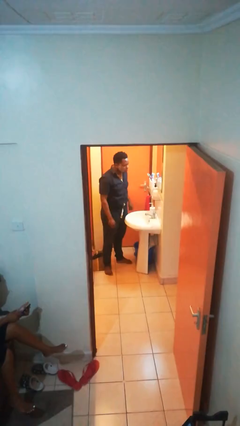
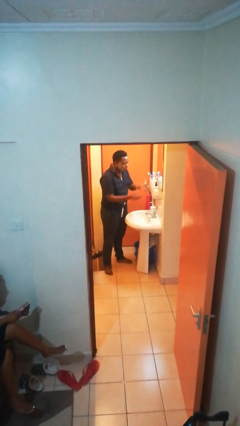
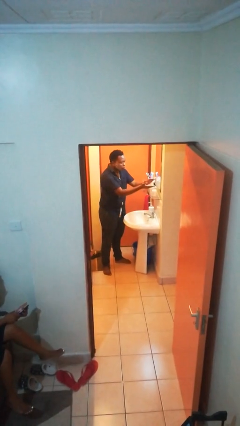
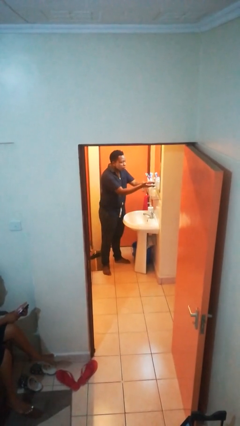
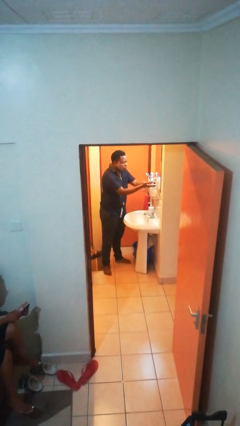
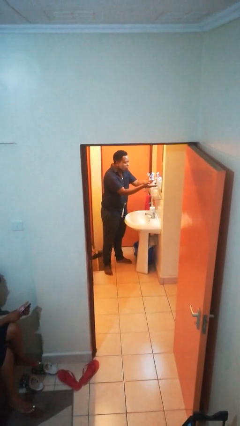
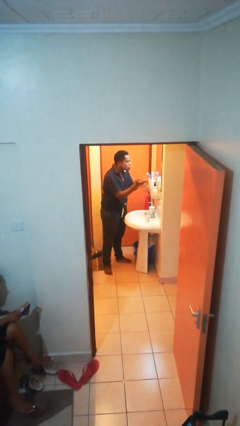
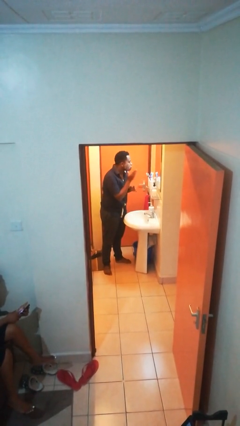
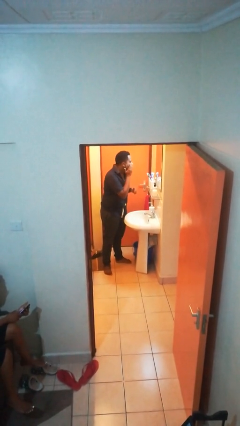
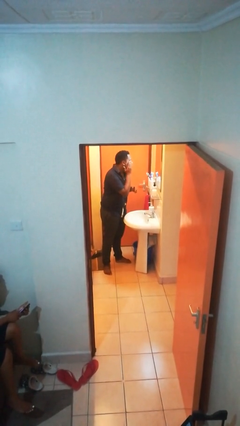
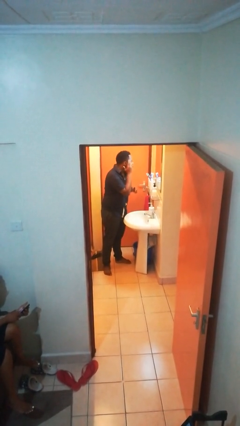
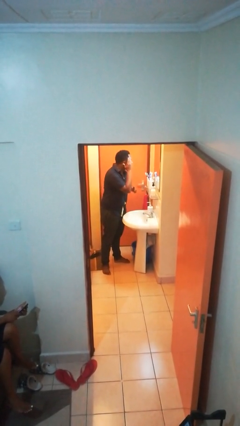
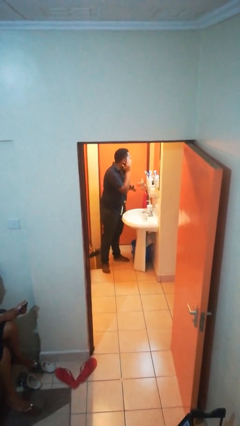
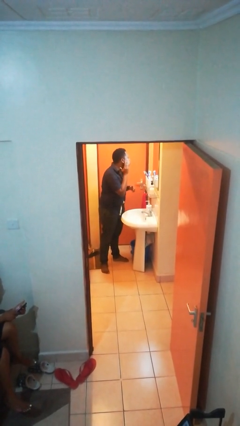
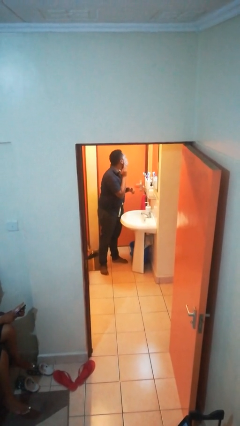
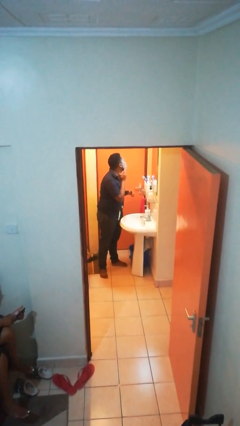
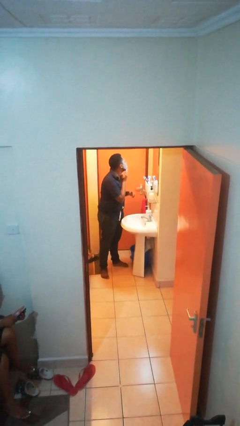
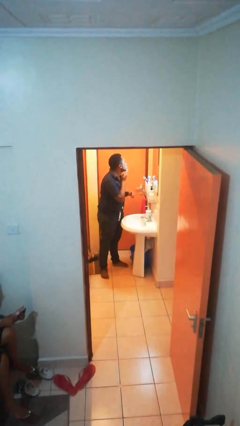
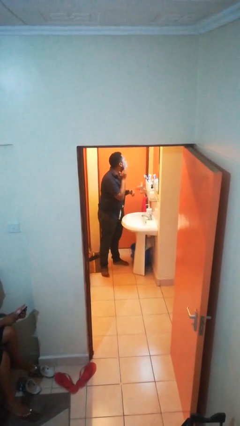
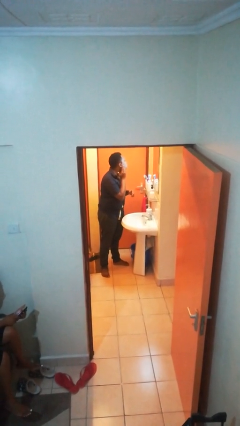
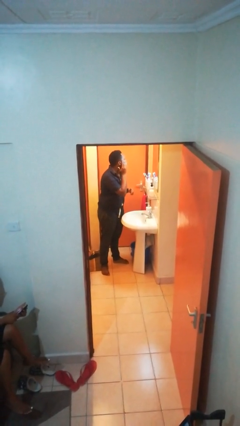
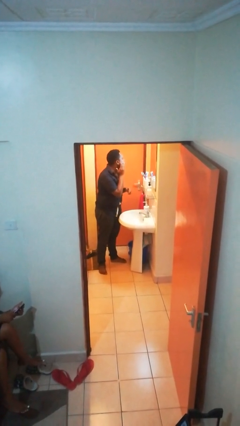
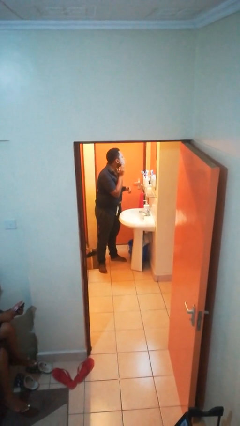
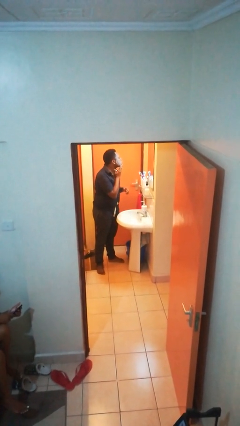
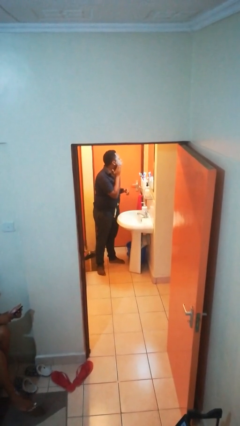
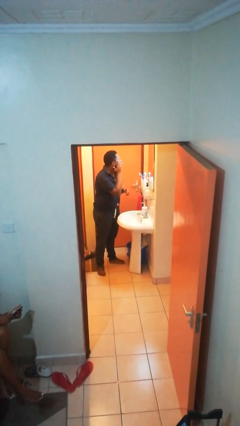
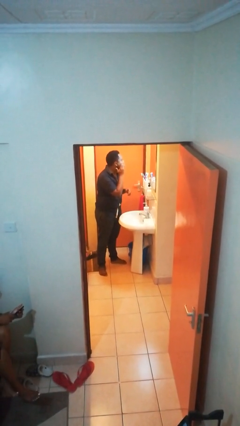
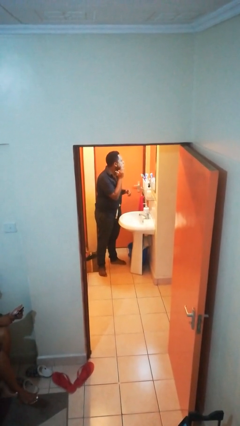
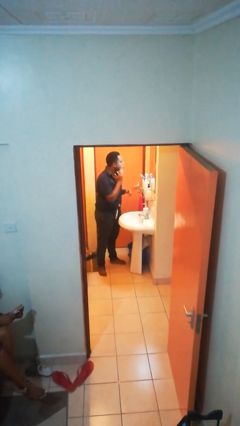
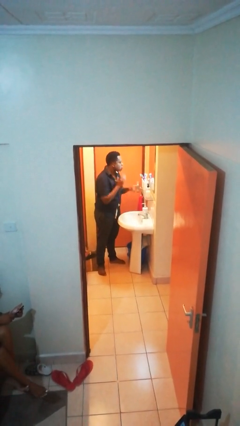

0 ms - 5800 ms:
person applies shaving cream

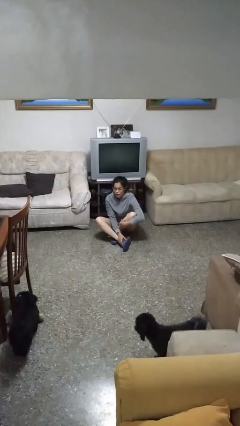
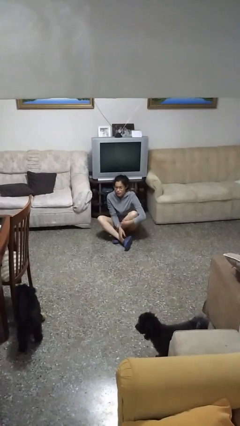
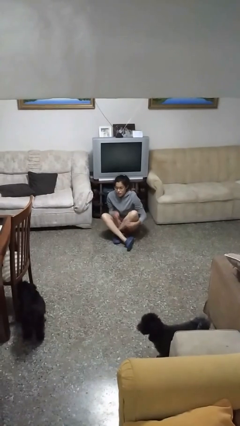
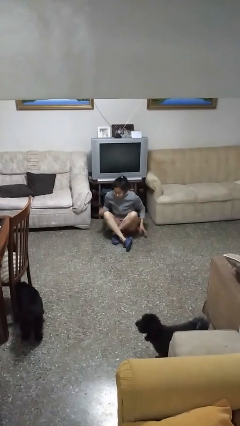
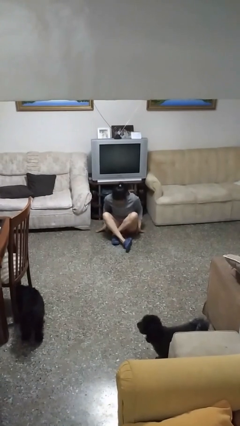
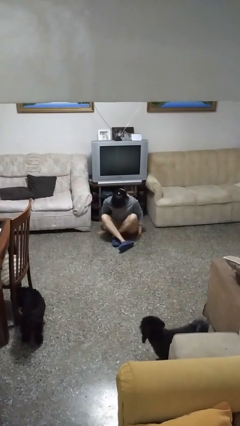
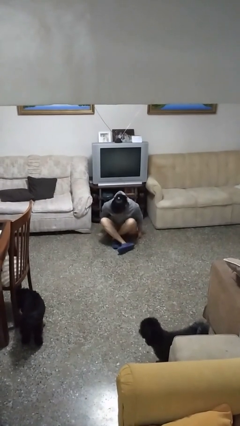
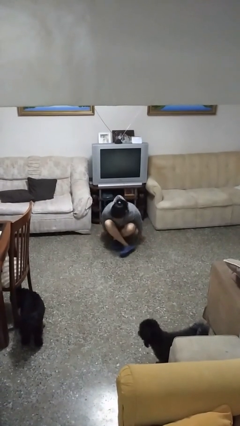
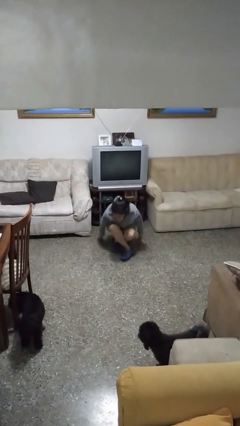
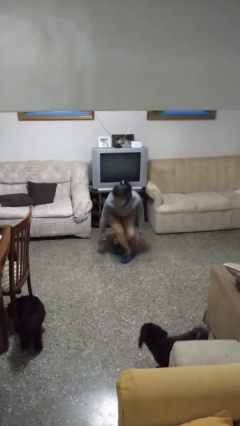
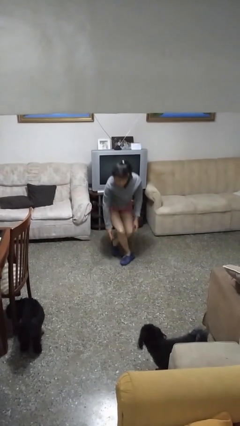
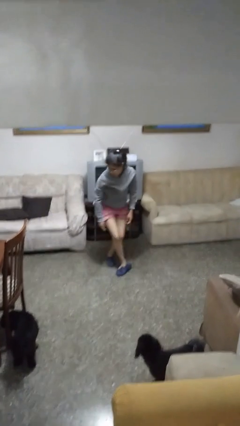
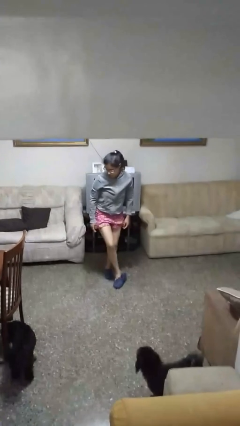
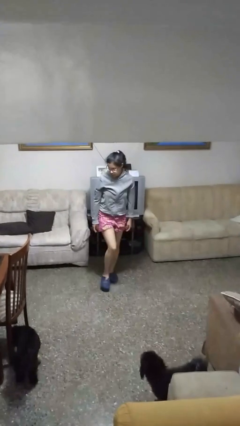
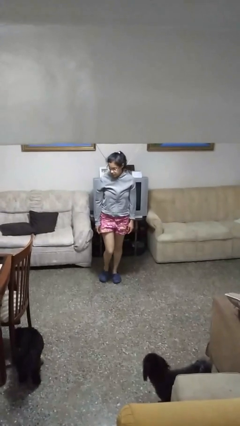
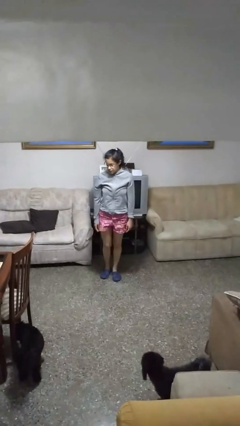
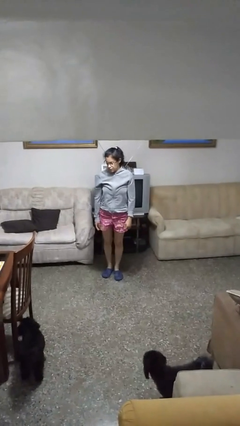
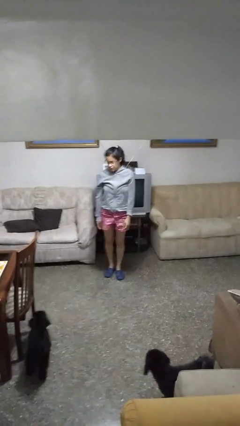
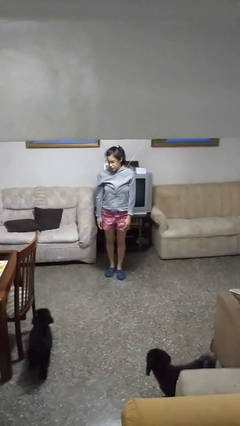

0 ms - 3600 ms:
person stands up from floor

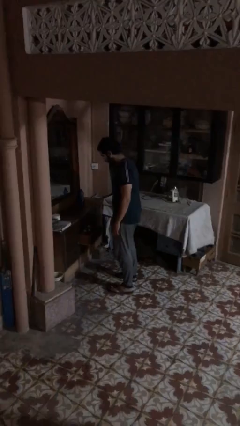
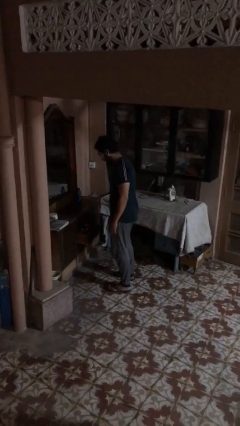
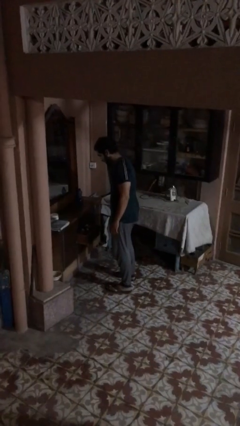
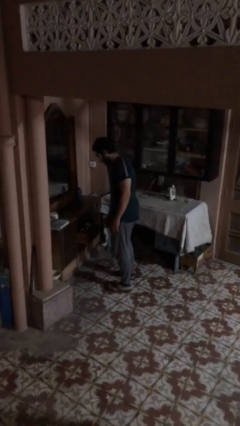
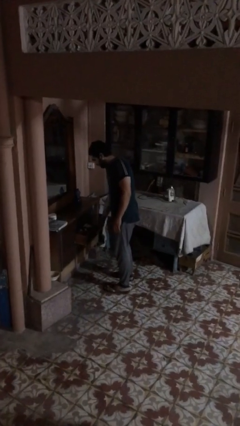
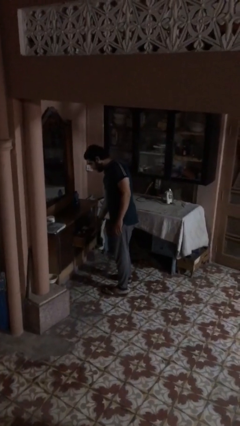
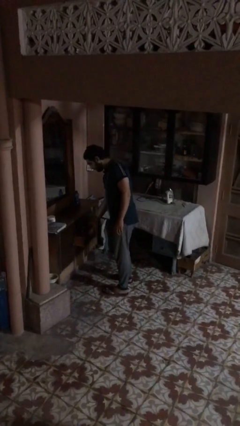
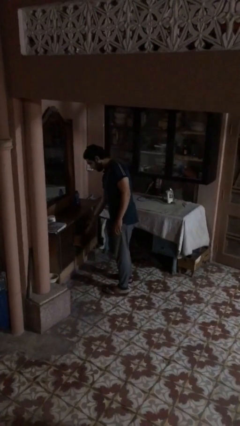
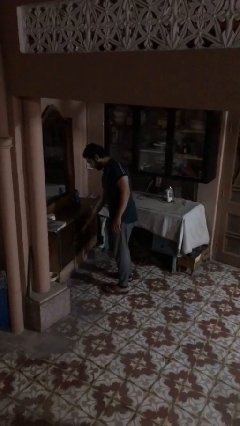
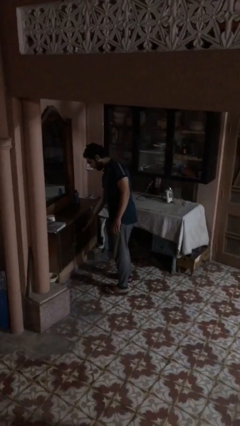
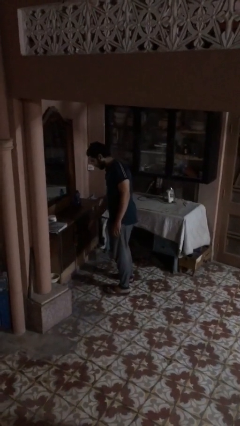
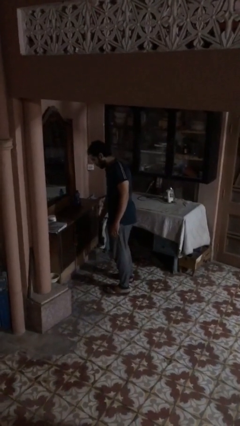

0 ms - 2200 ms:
person closes dresser drawer

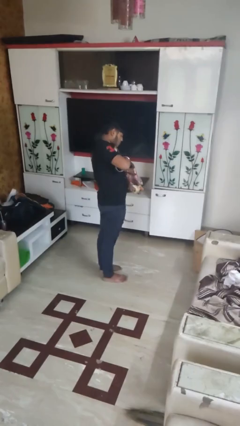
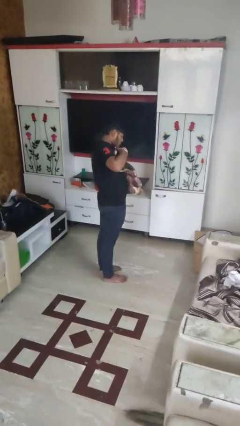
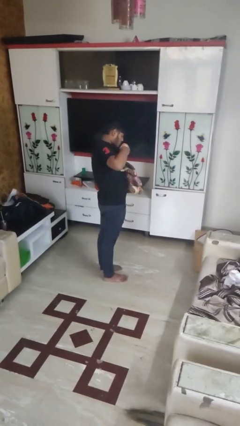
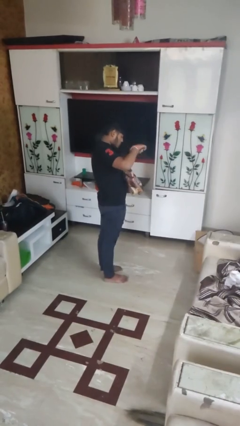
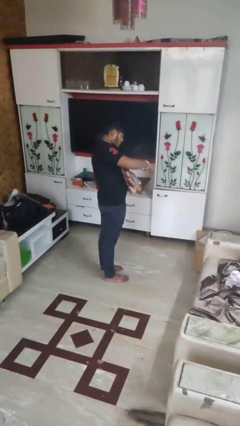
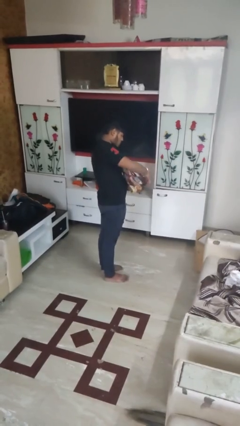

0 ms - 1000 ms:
person puts object into purse

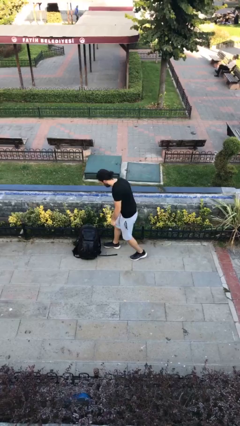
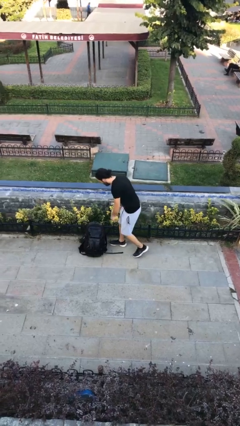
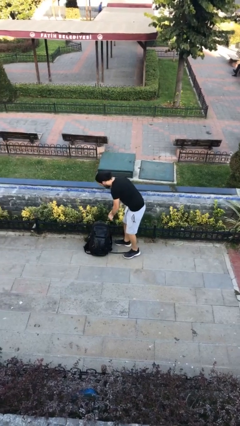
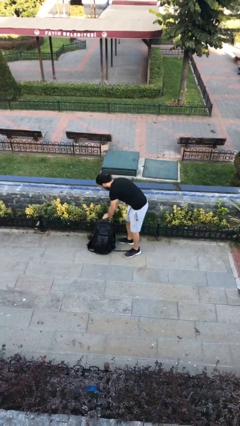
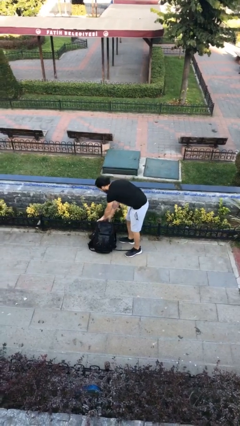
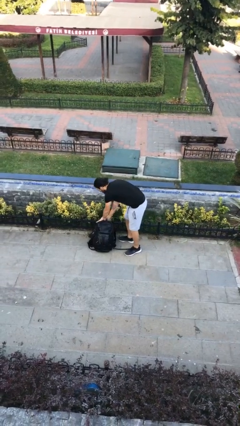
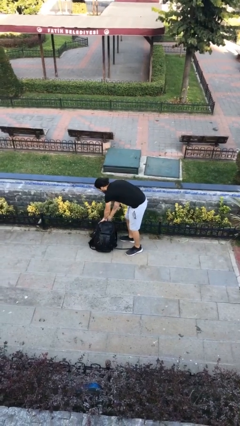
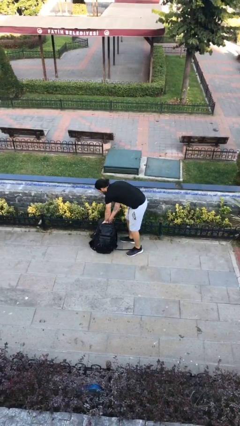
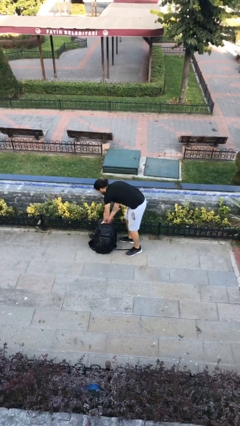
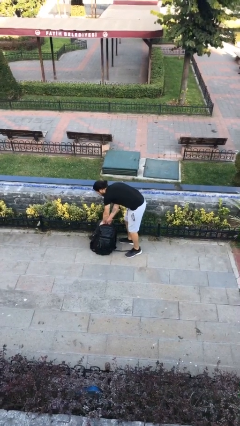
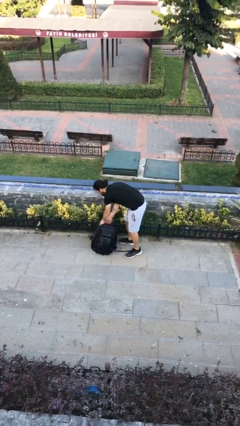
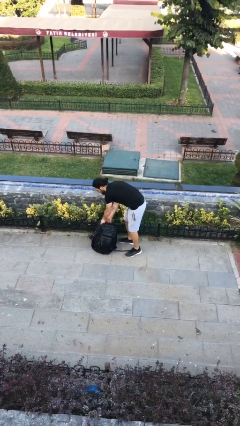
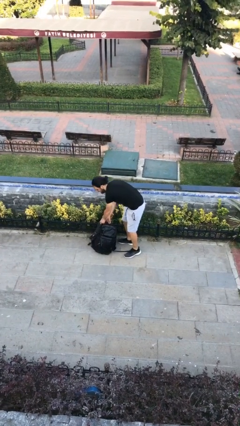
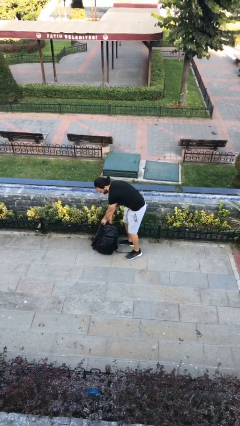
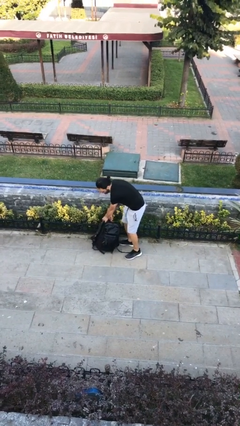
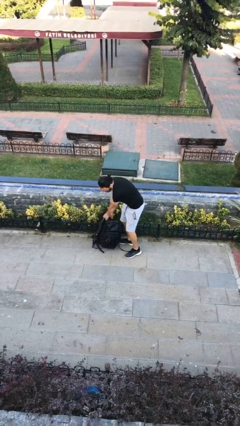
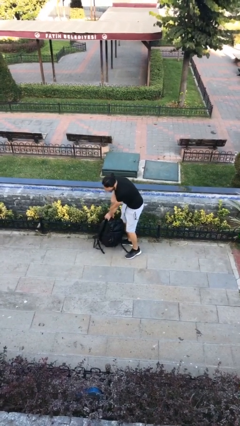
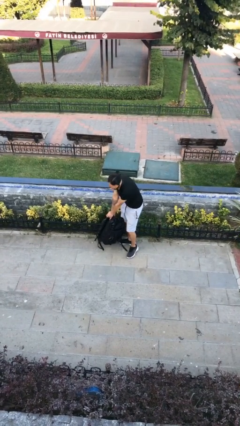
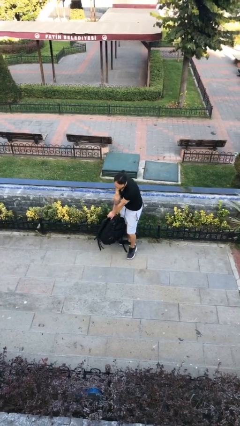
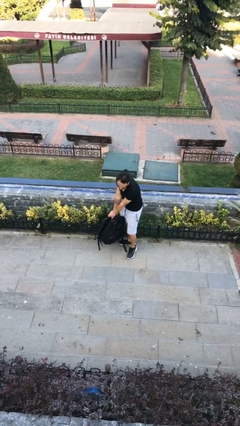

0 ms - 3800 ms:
person picks up object from floor

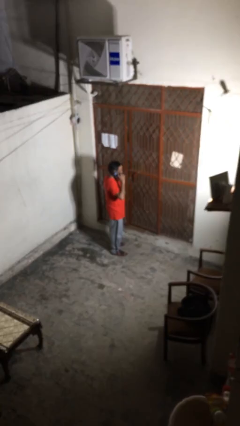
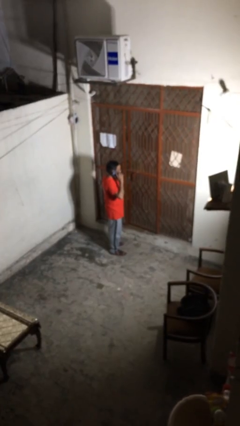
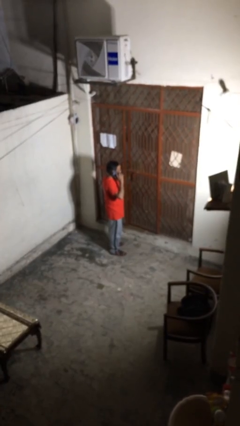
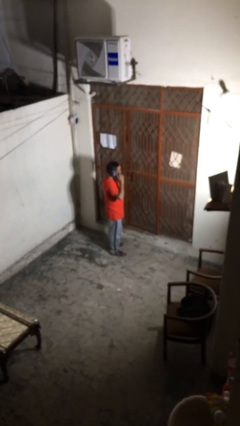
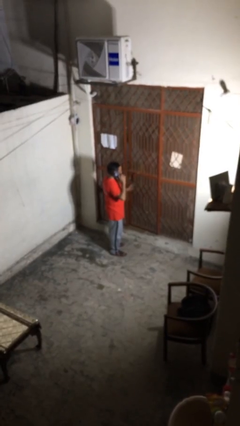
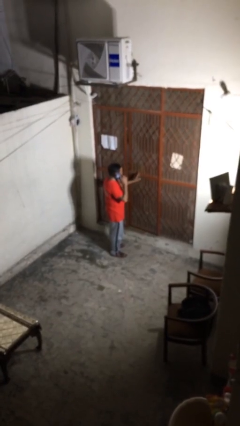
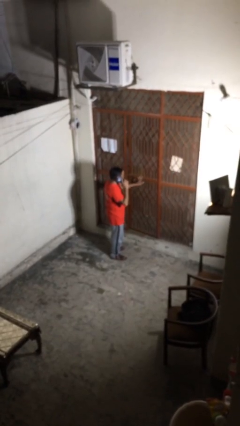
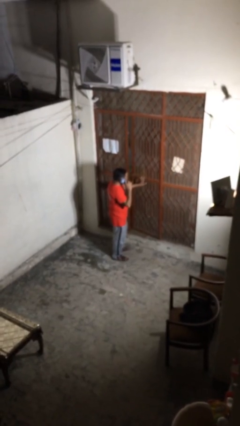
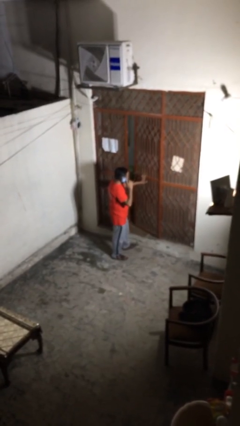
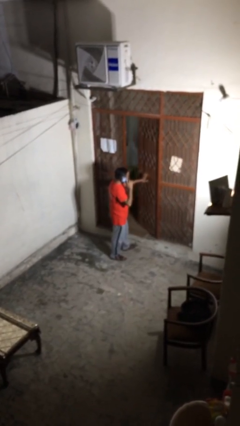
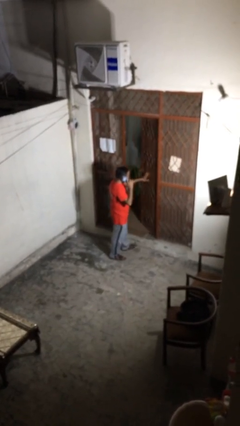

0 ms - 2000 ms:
person opens facility door
